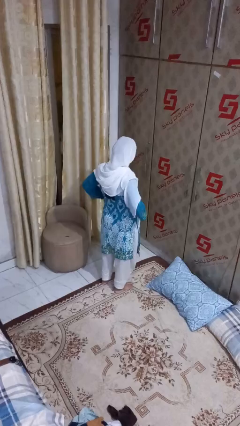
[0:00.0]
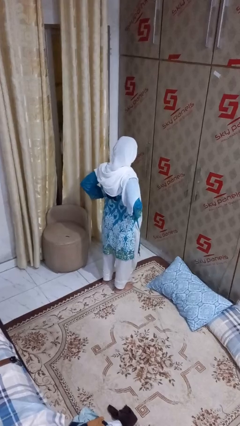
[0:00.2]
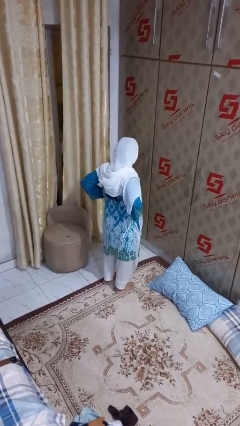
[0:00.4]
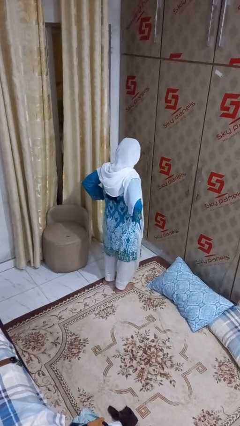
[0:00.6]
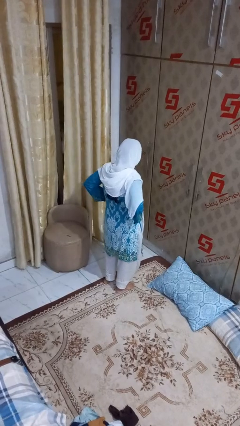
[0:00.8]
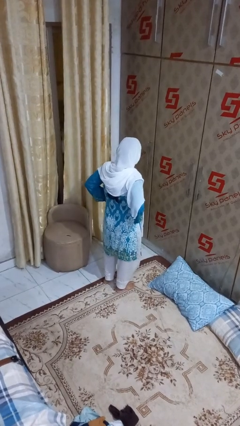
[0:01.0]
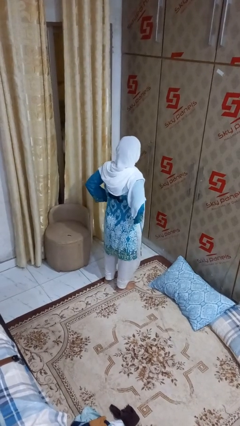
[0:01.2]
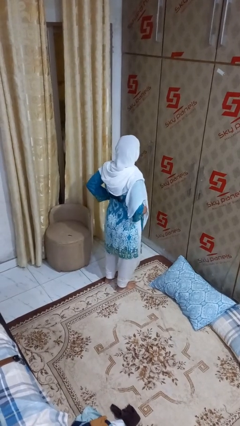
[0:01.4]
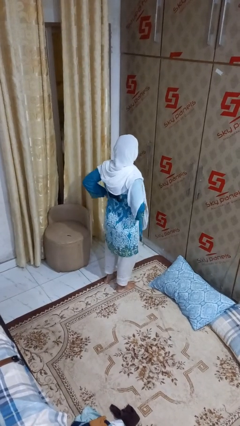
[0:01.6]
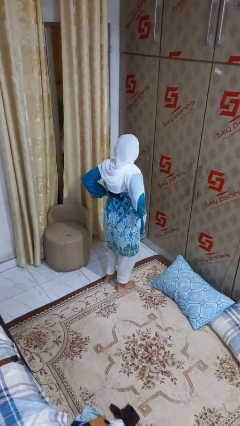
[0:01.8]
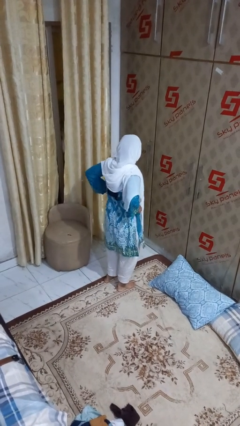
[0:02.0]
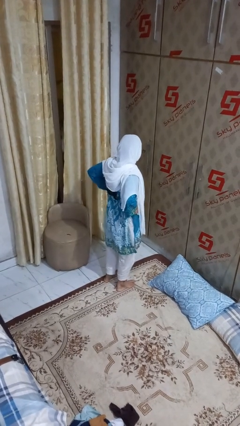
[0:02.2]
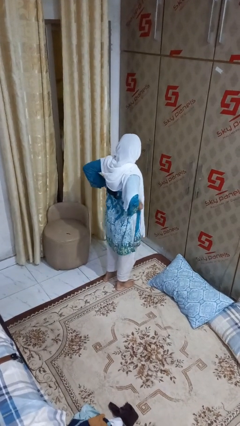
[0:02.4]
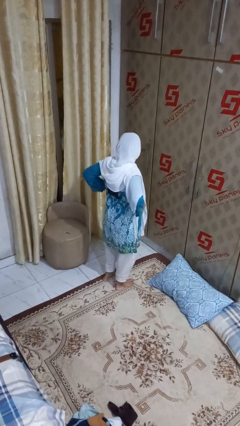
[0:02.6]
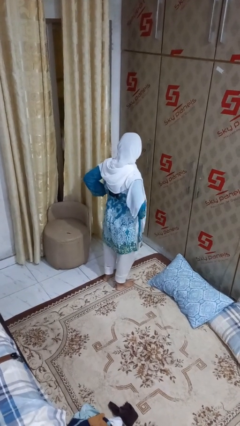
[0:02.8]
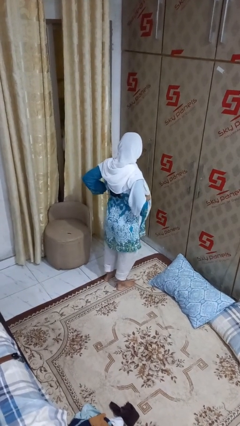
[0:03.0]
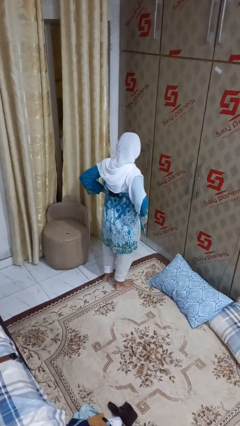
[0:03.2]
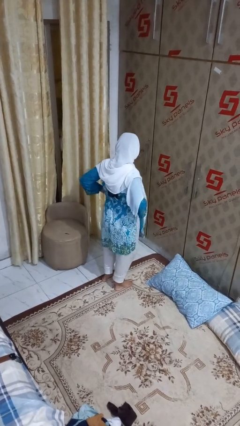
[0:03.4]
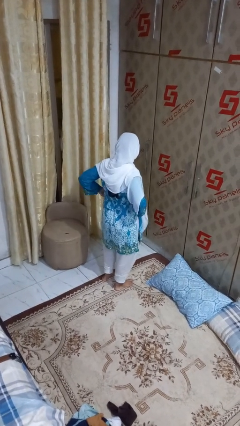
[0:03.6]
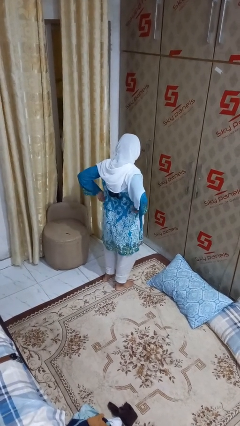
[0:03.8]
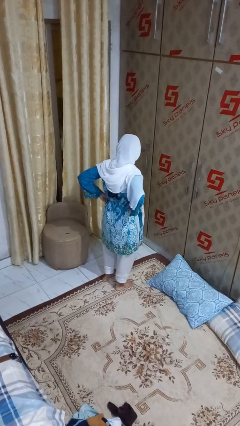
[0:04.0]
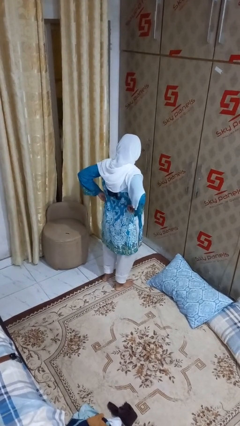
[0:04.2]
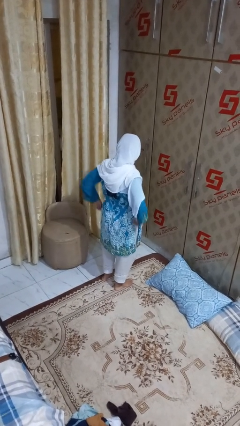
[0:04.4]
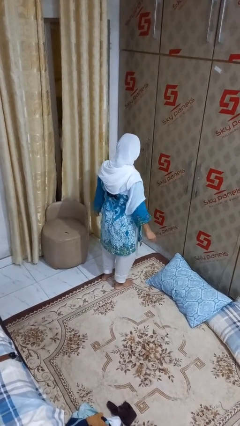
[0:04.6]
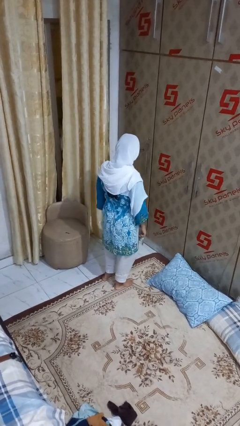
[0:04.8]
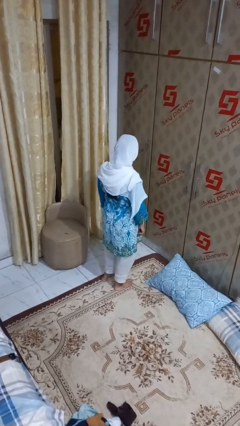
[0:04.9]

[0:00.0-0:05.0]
person hikes up pants

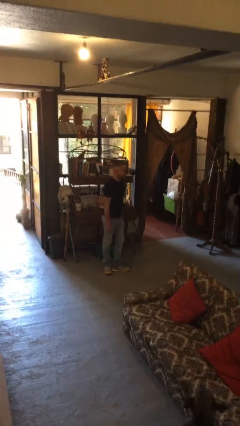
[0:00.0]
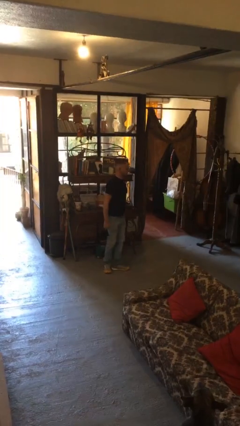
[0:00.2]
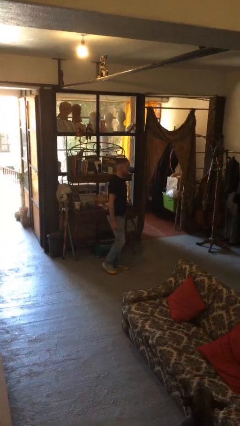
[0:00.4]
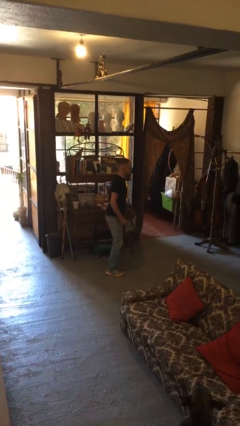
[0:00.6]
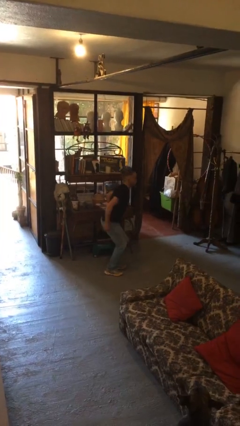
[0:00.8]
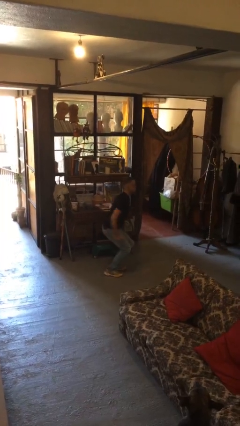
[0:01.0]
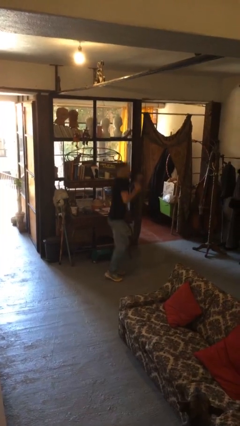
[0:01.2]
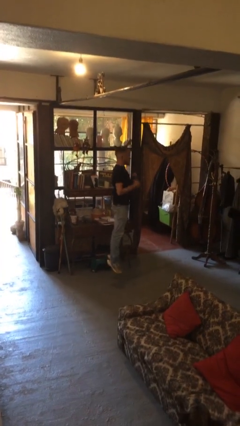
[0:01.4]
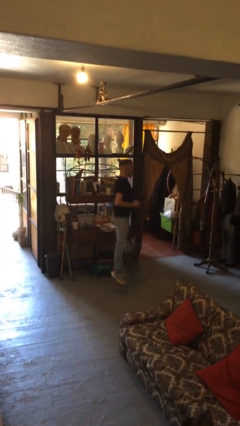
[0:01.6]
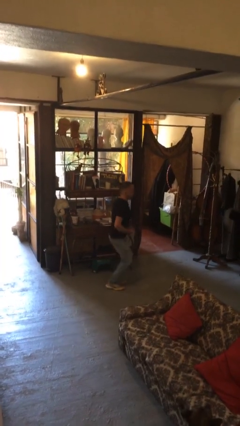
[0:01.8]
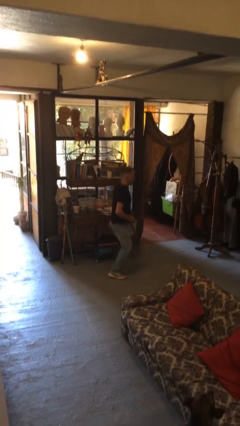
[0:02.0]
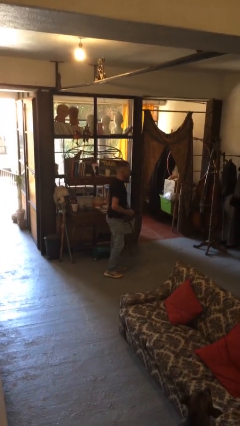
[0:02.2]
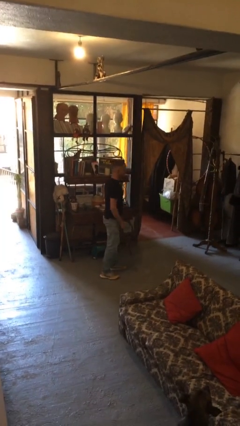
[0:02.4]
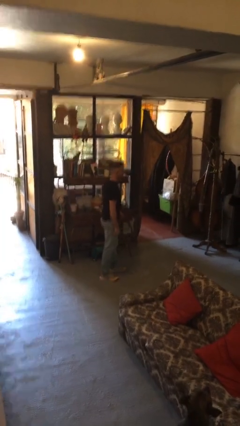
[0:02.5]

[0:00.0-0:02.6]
person jumps

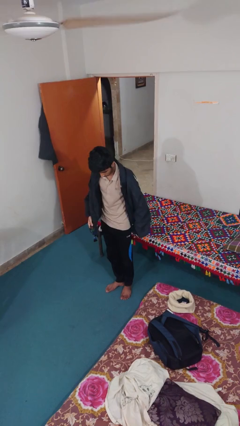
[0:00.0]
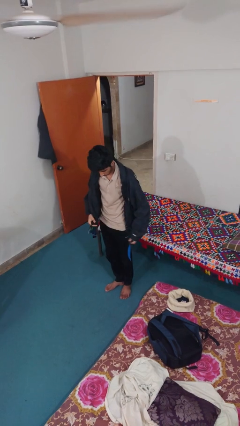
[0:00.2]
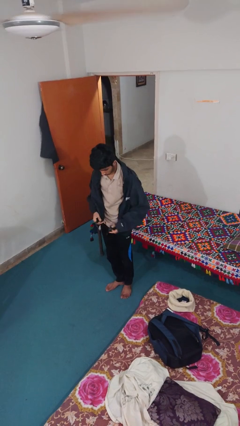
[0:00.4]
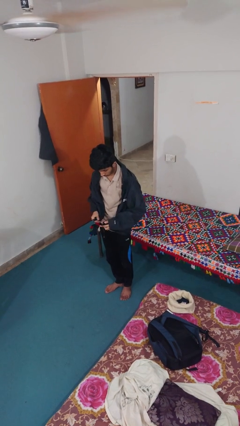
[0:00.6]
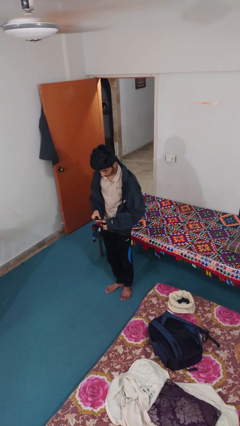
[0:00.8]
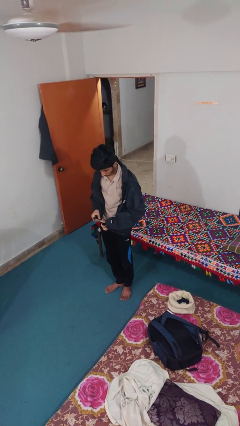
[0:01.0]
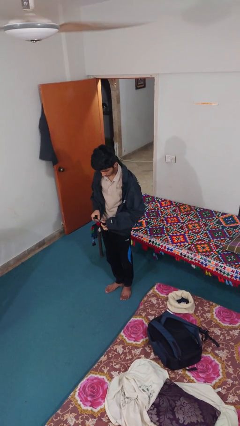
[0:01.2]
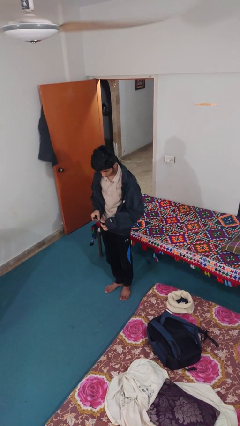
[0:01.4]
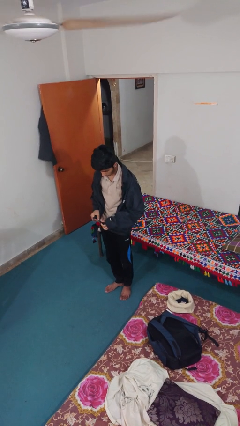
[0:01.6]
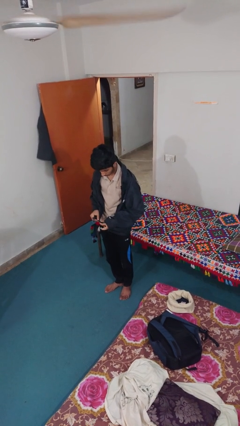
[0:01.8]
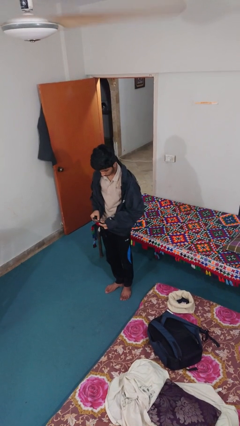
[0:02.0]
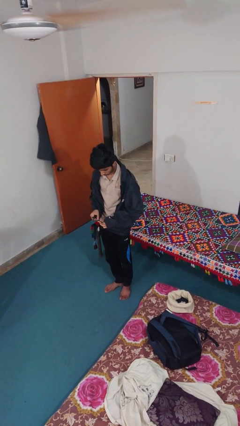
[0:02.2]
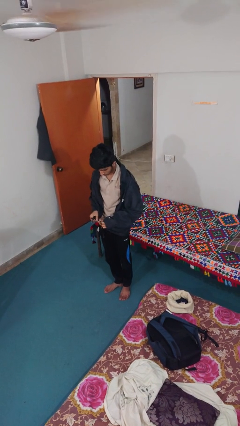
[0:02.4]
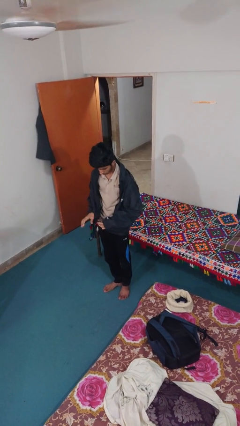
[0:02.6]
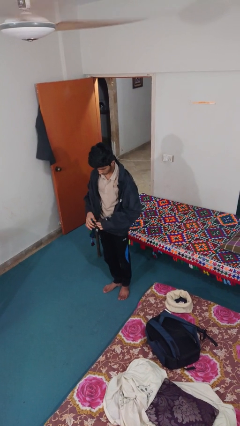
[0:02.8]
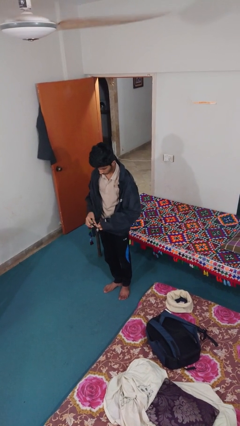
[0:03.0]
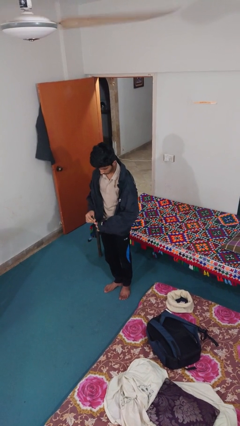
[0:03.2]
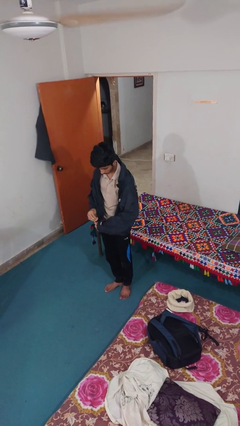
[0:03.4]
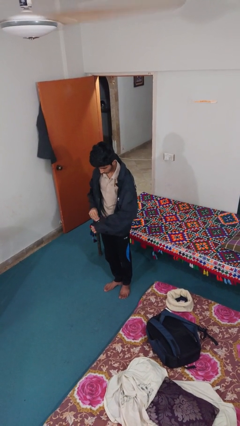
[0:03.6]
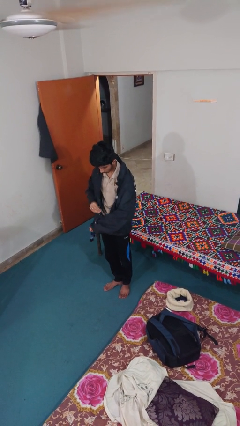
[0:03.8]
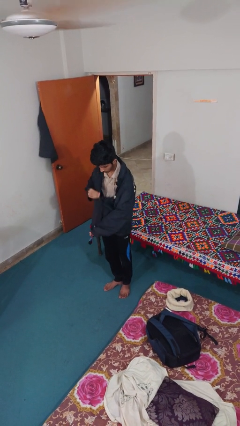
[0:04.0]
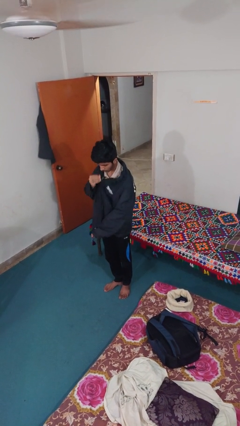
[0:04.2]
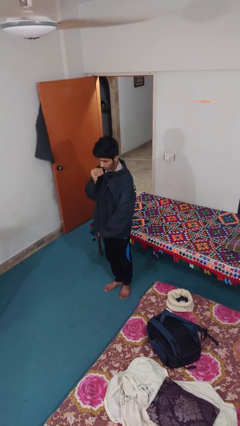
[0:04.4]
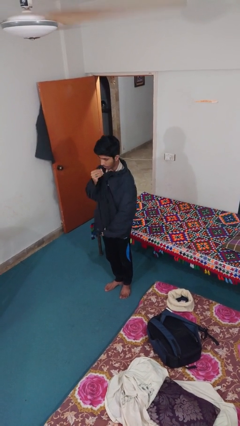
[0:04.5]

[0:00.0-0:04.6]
person zips up jacket

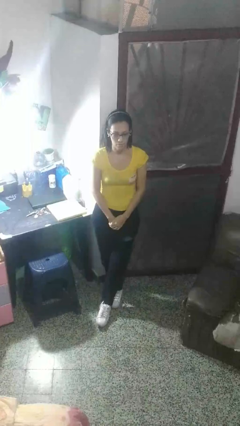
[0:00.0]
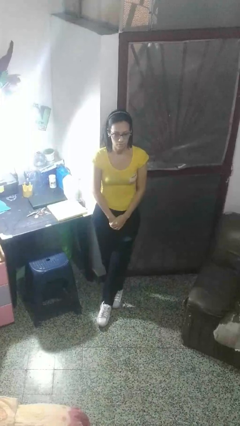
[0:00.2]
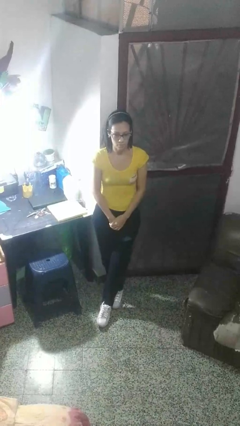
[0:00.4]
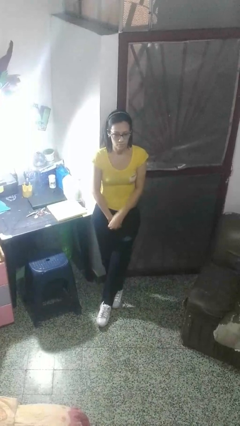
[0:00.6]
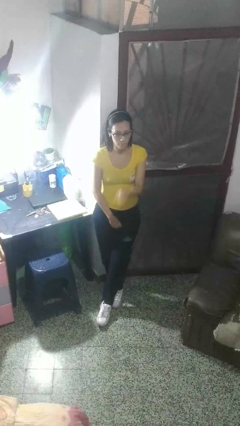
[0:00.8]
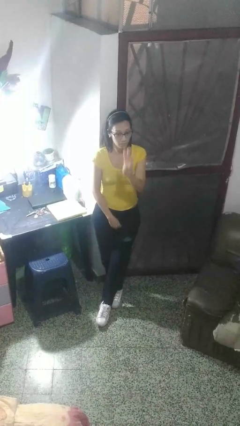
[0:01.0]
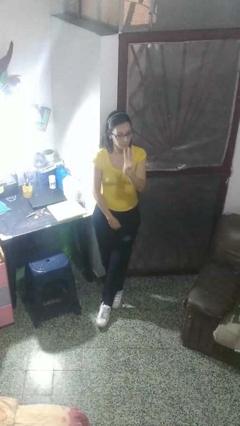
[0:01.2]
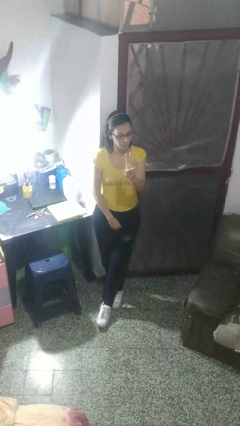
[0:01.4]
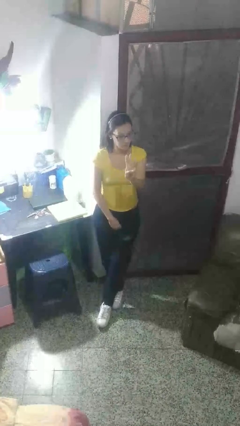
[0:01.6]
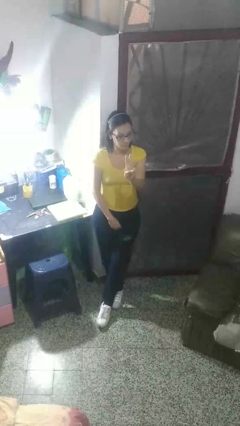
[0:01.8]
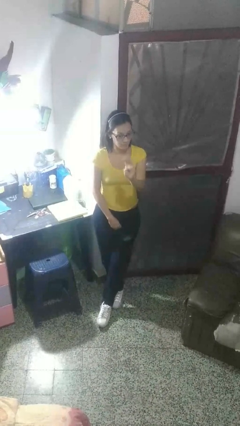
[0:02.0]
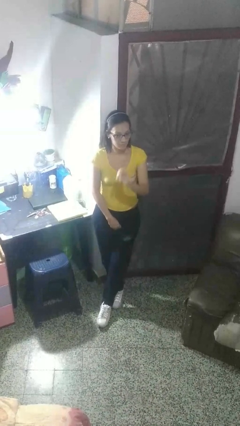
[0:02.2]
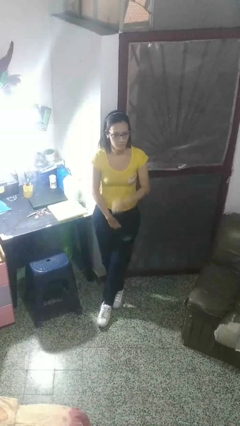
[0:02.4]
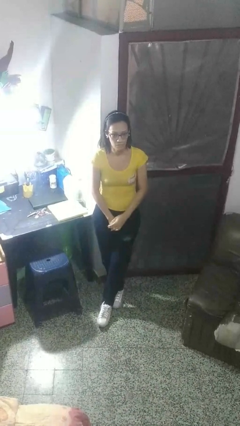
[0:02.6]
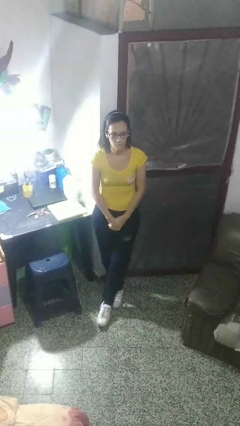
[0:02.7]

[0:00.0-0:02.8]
person gestures number three

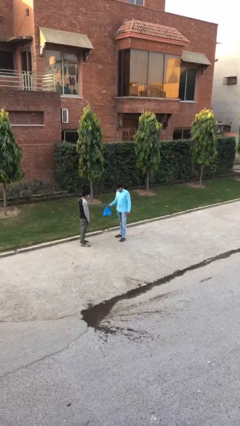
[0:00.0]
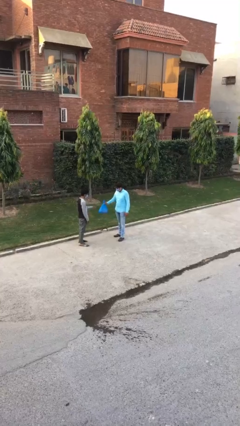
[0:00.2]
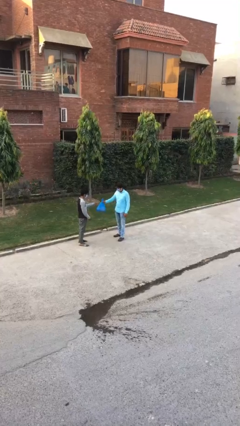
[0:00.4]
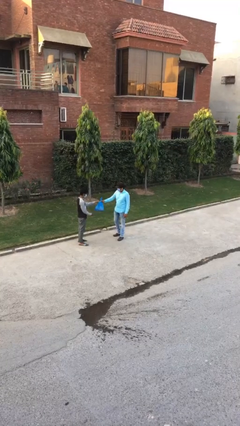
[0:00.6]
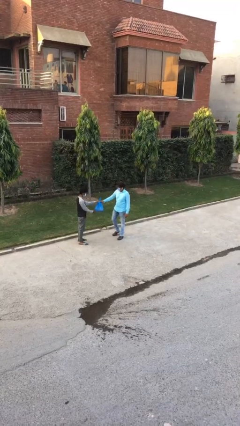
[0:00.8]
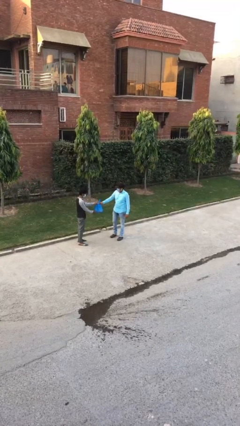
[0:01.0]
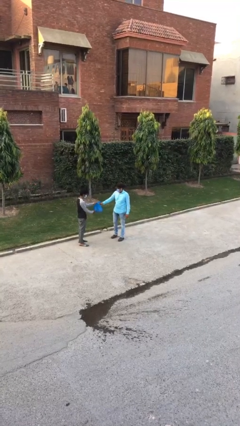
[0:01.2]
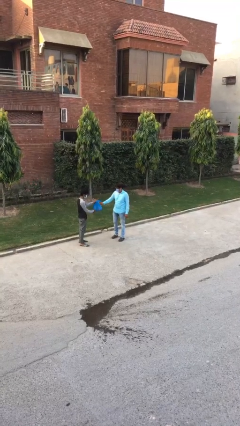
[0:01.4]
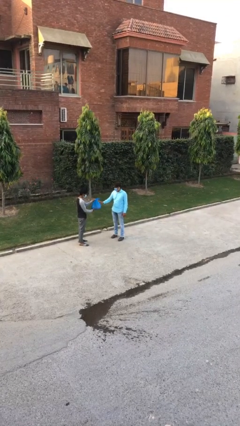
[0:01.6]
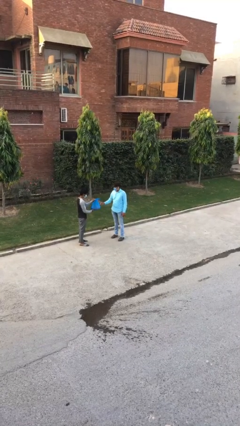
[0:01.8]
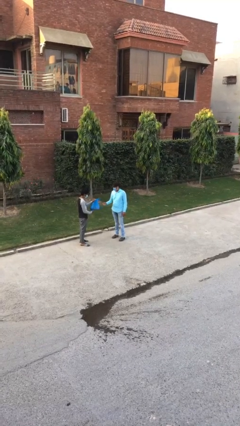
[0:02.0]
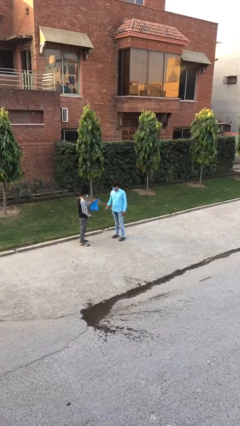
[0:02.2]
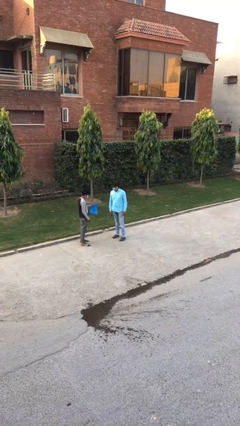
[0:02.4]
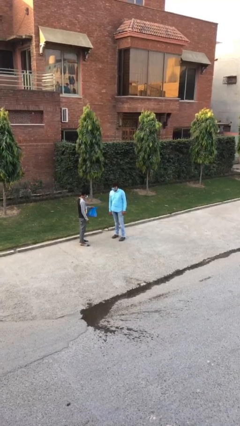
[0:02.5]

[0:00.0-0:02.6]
person transfers object to person

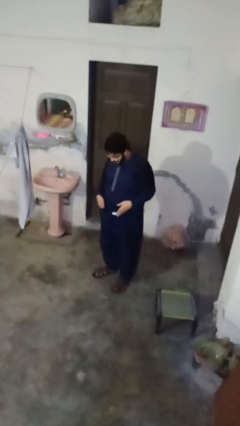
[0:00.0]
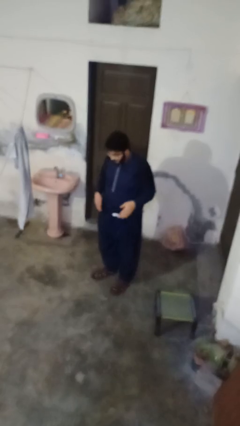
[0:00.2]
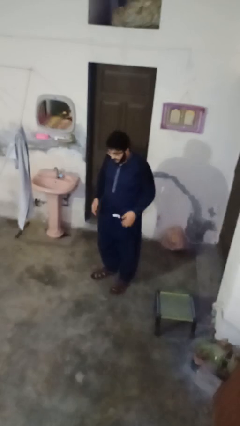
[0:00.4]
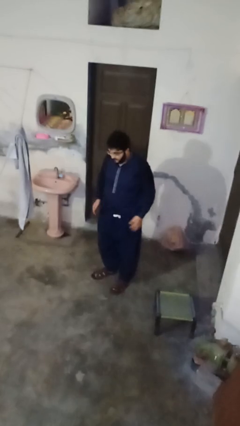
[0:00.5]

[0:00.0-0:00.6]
person puts hands in back pockets
